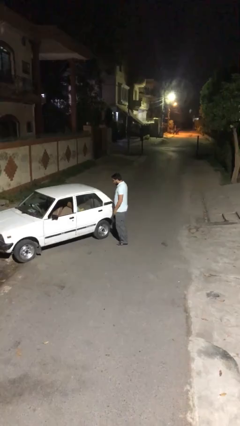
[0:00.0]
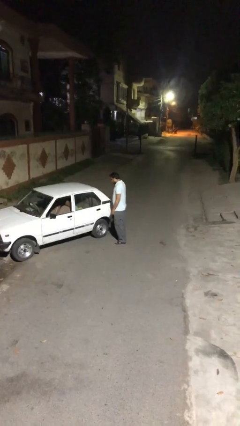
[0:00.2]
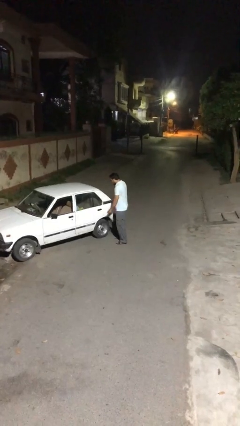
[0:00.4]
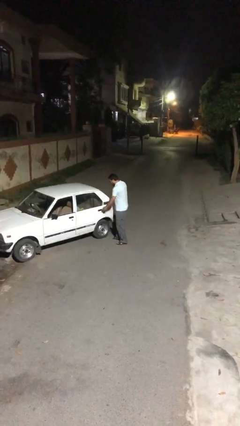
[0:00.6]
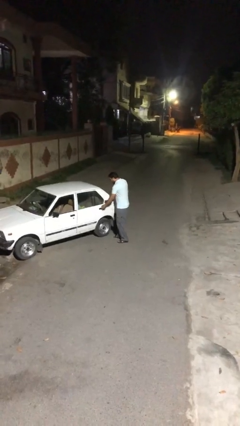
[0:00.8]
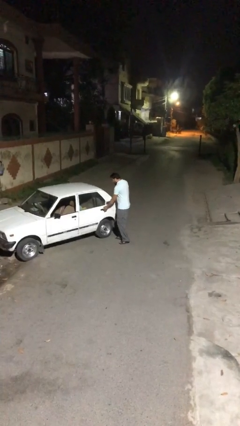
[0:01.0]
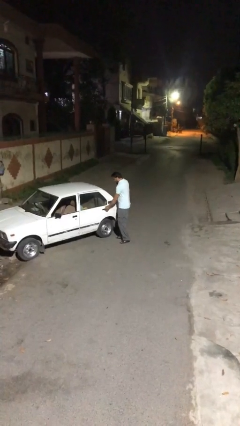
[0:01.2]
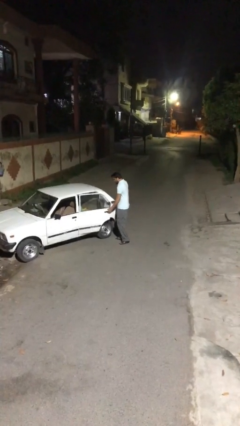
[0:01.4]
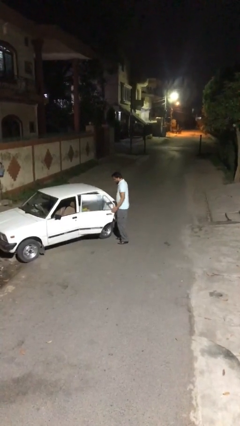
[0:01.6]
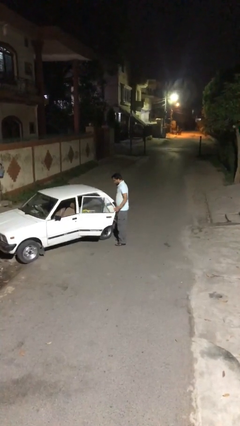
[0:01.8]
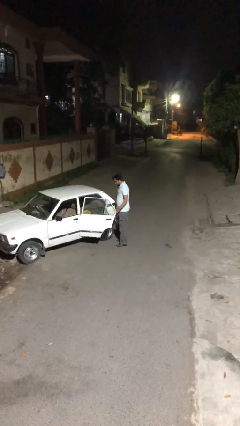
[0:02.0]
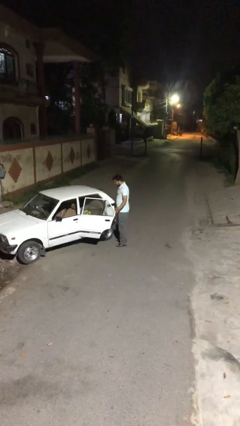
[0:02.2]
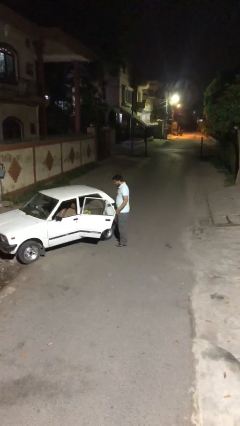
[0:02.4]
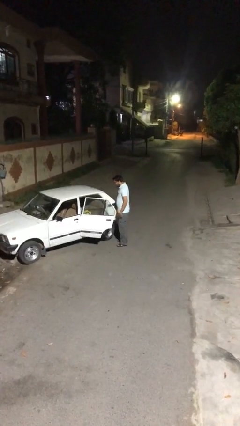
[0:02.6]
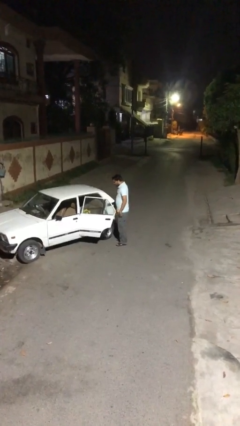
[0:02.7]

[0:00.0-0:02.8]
person opens car door

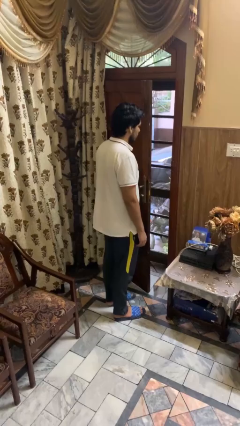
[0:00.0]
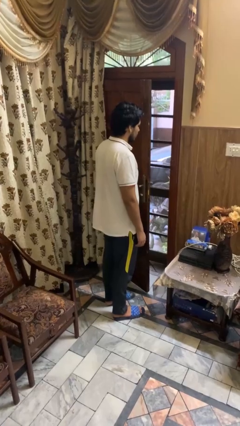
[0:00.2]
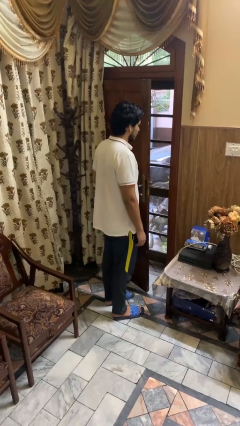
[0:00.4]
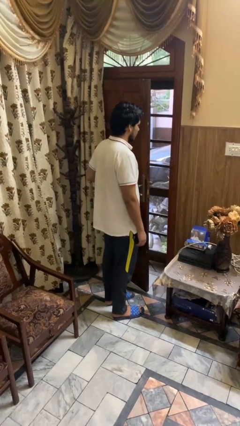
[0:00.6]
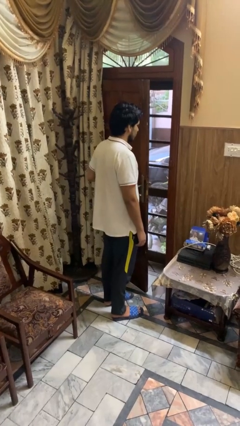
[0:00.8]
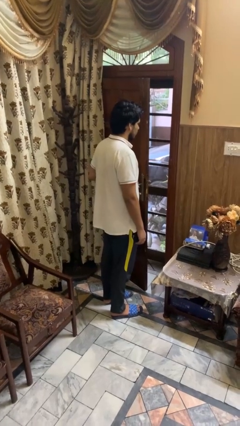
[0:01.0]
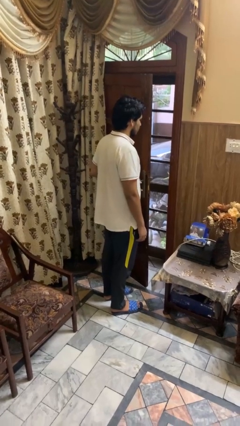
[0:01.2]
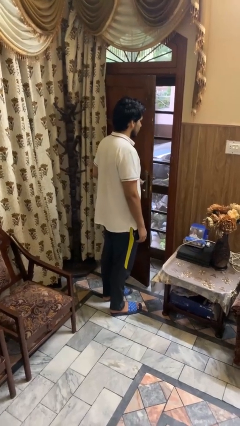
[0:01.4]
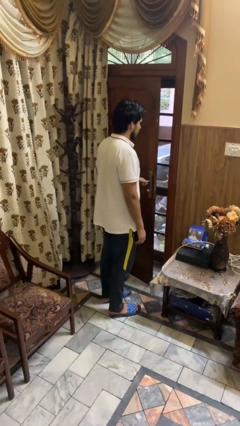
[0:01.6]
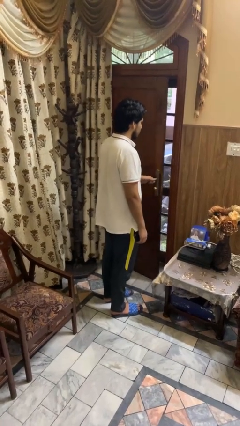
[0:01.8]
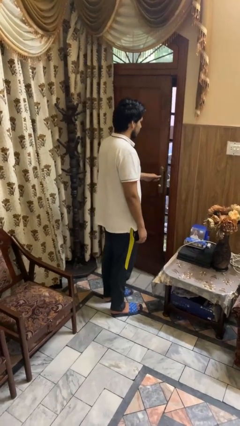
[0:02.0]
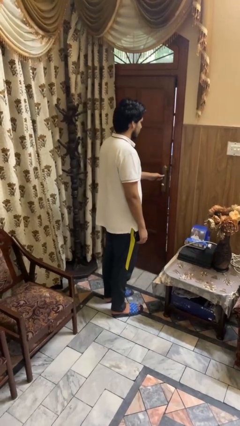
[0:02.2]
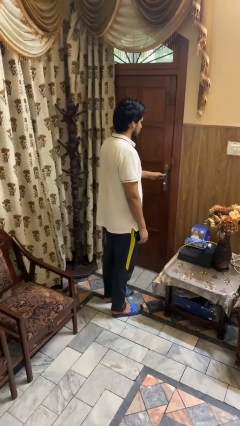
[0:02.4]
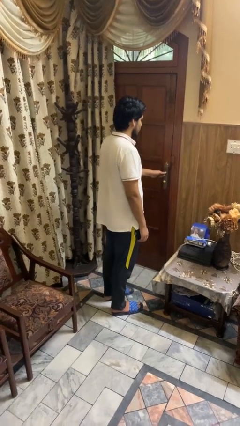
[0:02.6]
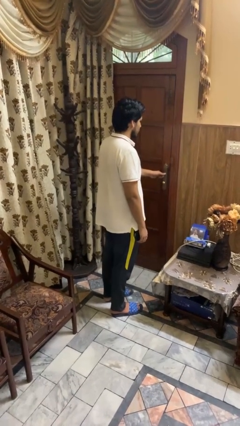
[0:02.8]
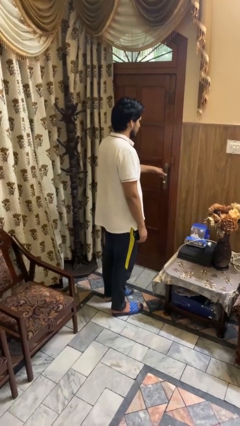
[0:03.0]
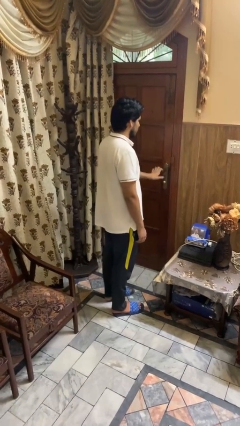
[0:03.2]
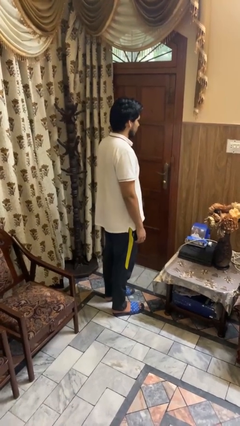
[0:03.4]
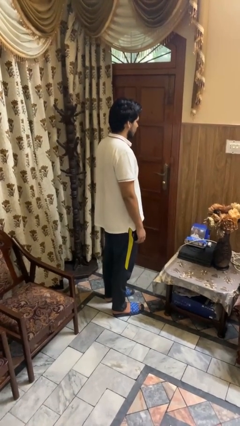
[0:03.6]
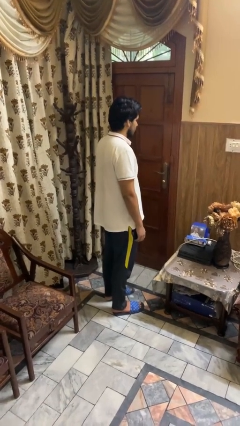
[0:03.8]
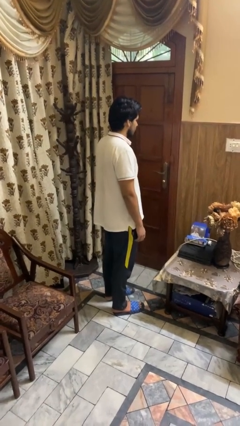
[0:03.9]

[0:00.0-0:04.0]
person closes facility door

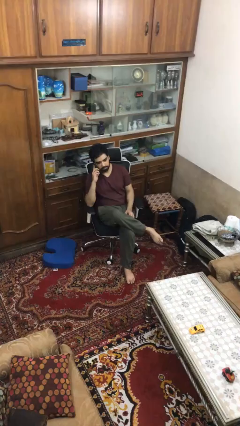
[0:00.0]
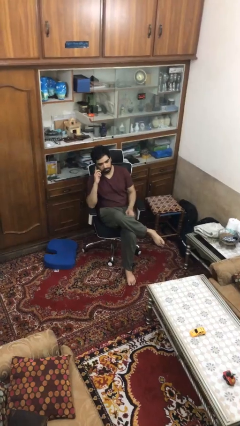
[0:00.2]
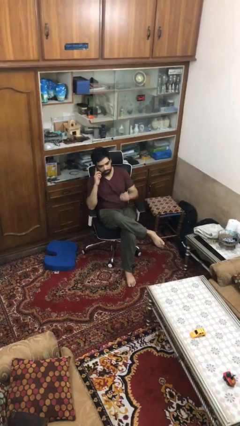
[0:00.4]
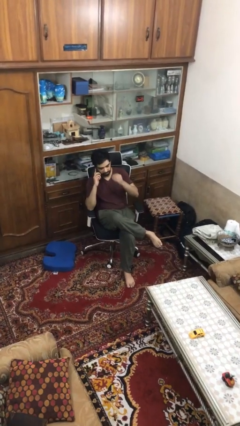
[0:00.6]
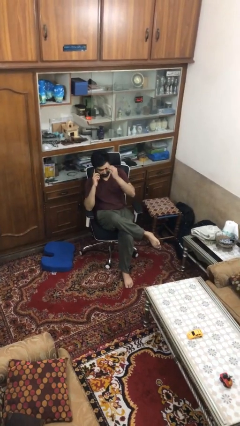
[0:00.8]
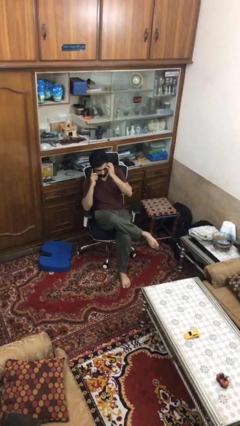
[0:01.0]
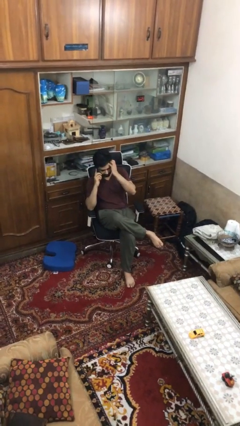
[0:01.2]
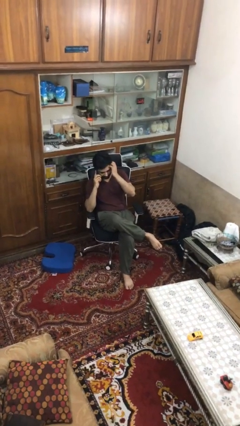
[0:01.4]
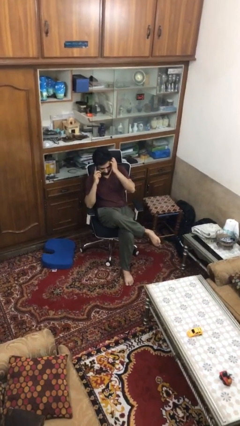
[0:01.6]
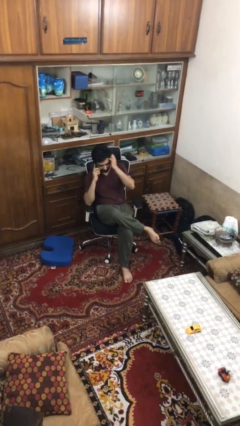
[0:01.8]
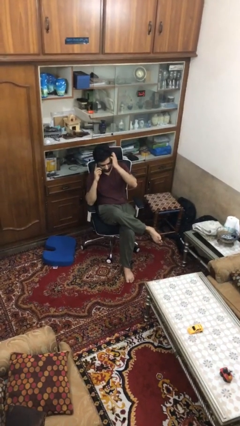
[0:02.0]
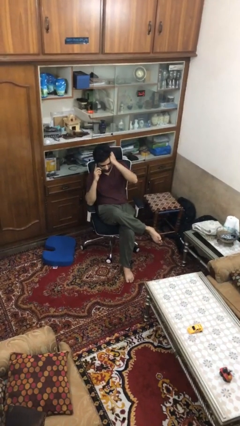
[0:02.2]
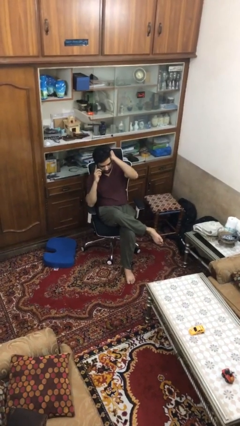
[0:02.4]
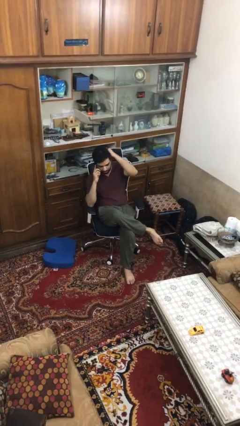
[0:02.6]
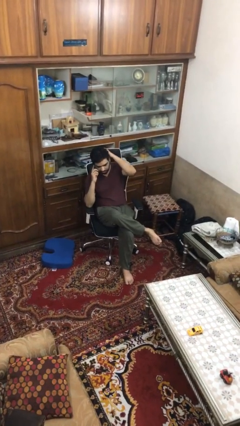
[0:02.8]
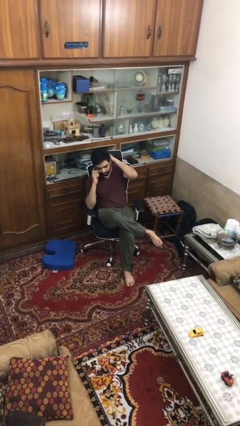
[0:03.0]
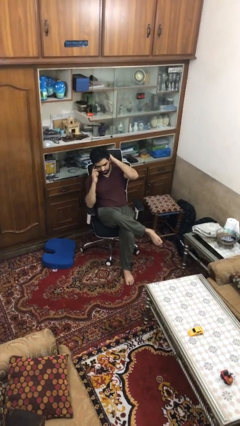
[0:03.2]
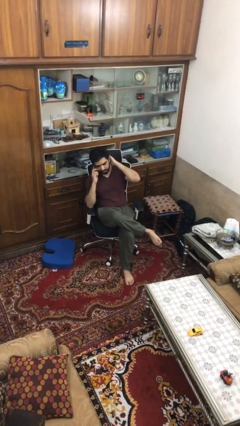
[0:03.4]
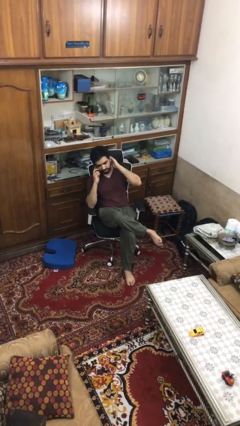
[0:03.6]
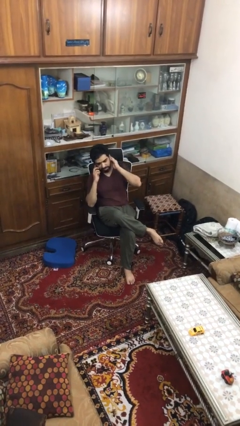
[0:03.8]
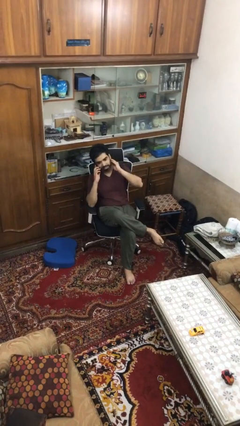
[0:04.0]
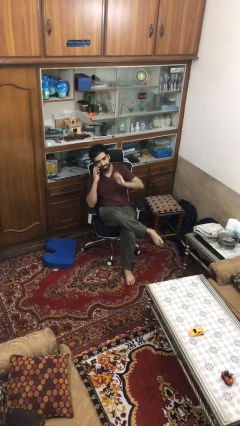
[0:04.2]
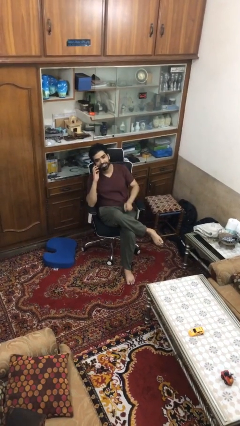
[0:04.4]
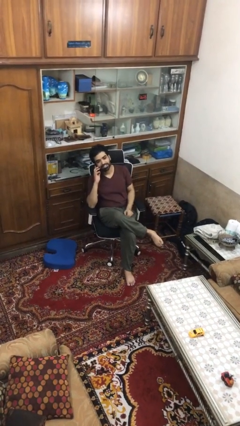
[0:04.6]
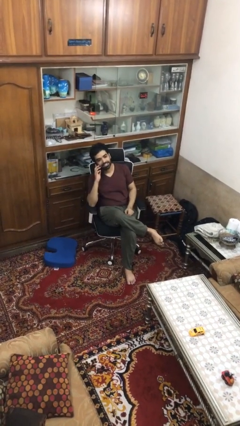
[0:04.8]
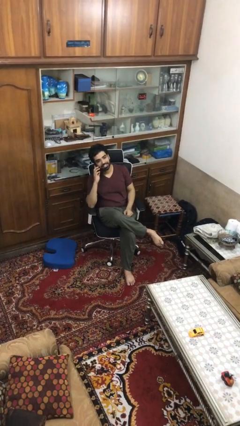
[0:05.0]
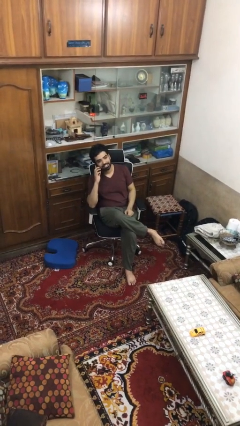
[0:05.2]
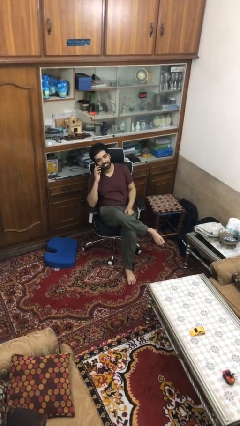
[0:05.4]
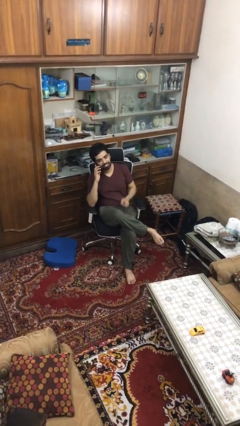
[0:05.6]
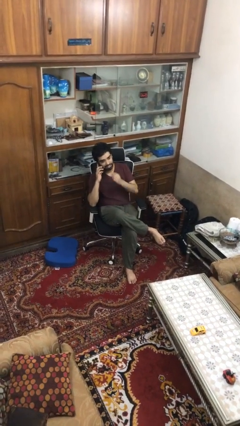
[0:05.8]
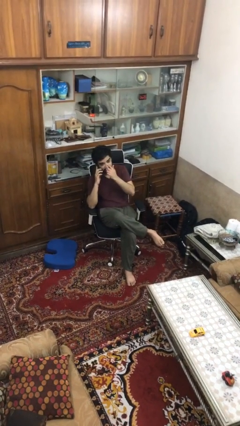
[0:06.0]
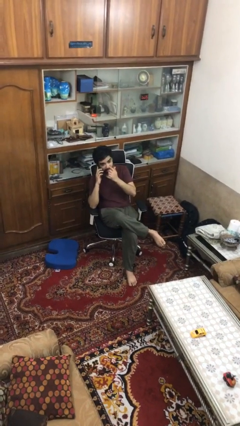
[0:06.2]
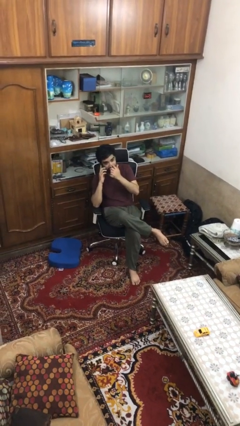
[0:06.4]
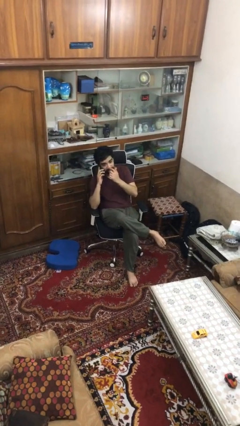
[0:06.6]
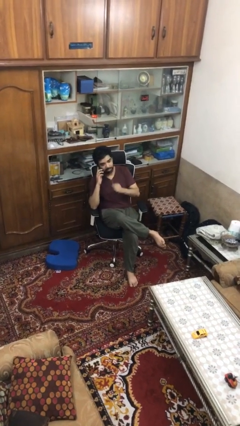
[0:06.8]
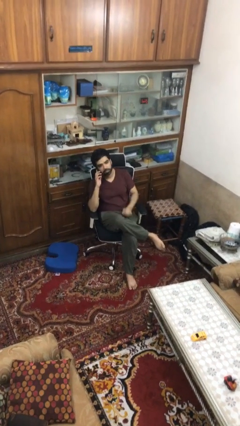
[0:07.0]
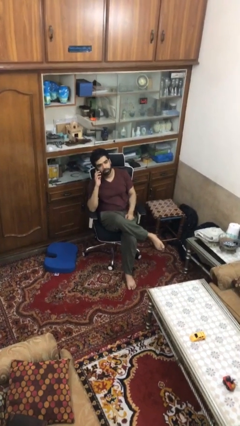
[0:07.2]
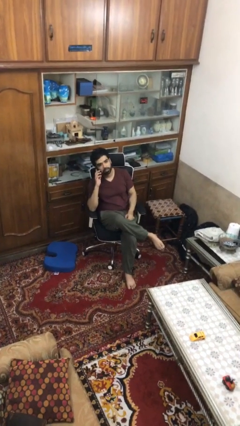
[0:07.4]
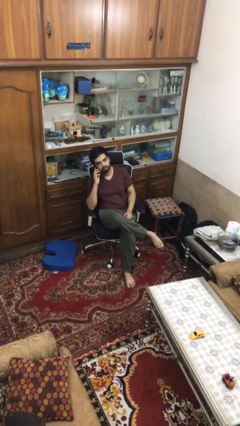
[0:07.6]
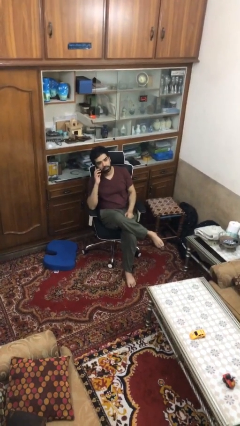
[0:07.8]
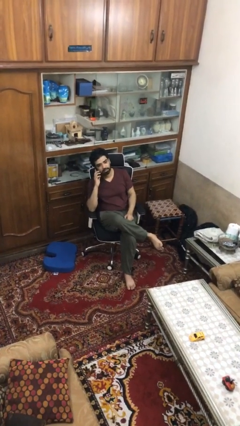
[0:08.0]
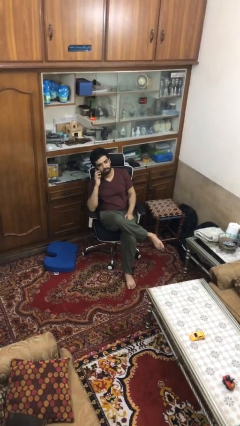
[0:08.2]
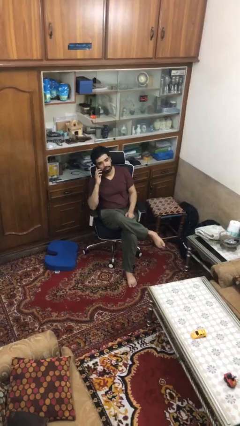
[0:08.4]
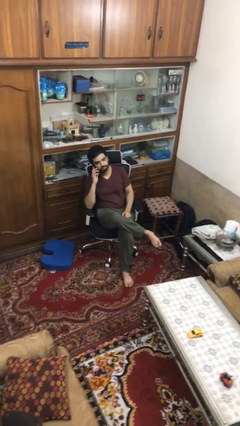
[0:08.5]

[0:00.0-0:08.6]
person talks on phone

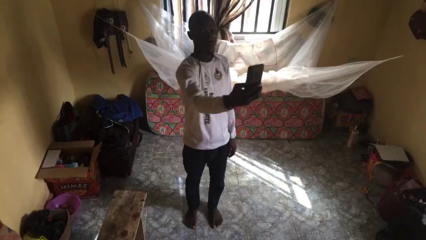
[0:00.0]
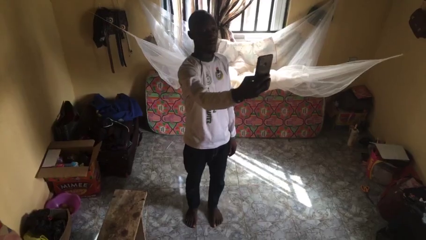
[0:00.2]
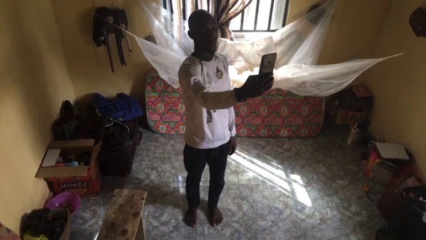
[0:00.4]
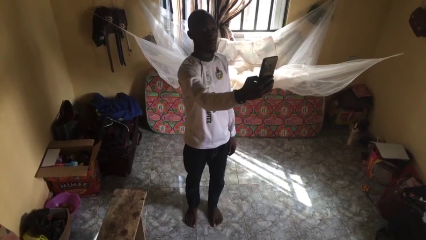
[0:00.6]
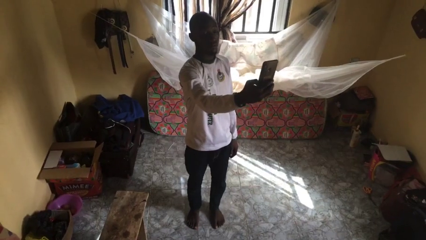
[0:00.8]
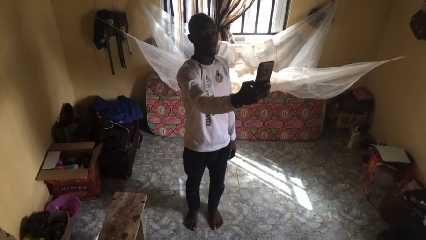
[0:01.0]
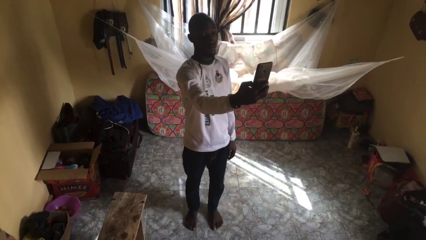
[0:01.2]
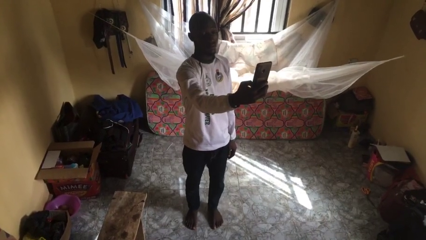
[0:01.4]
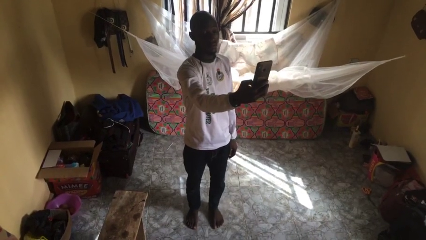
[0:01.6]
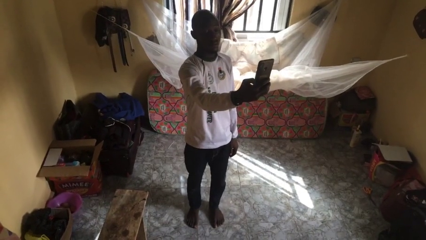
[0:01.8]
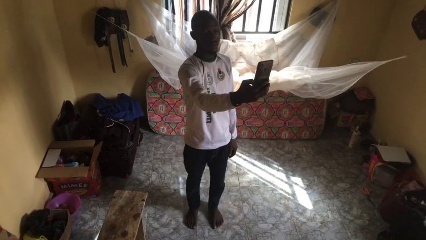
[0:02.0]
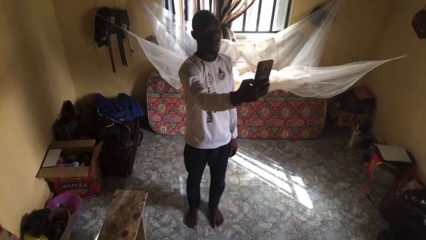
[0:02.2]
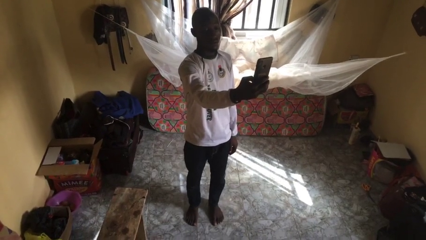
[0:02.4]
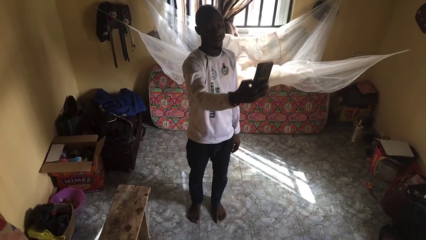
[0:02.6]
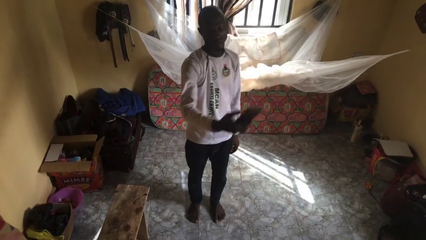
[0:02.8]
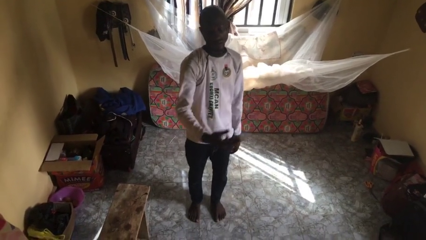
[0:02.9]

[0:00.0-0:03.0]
person takes selfie
